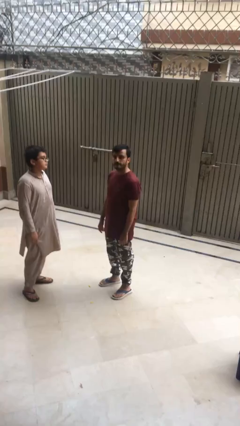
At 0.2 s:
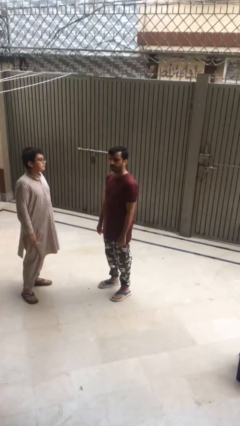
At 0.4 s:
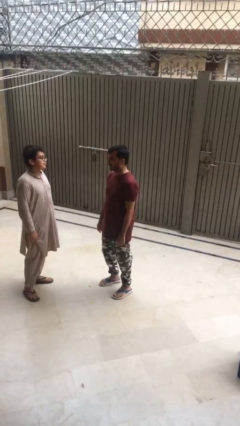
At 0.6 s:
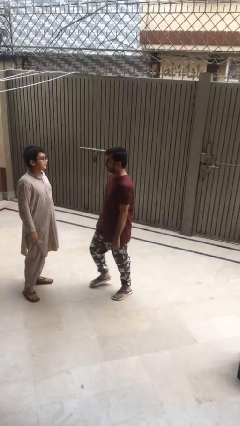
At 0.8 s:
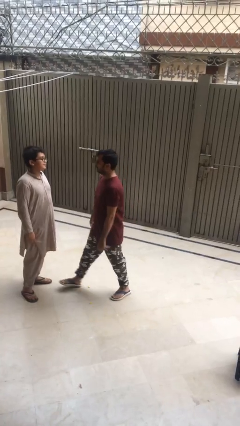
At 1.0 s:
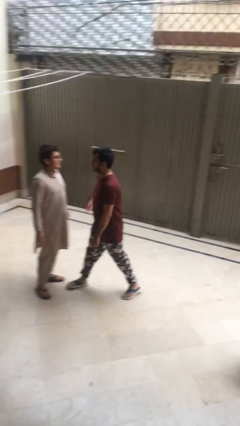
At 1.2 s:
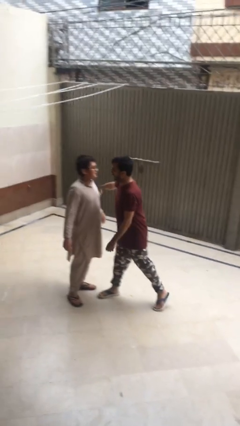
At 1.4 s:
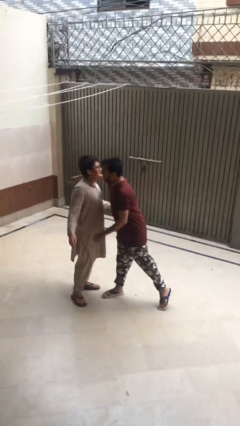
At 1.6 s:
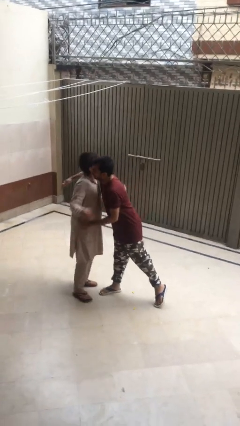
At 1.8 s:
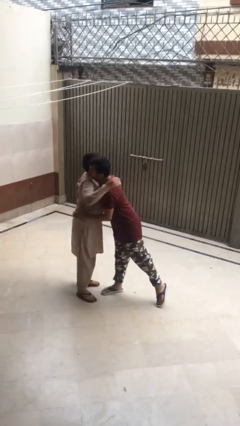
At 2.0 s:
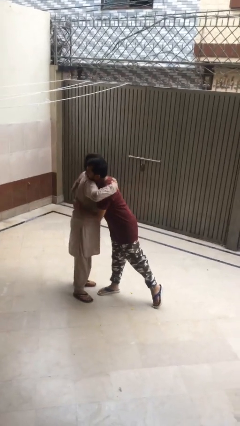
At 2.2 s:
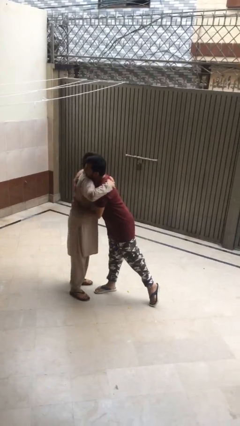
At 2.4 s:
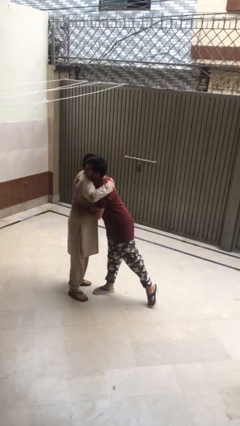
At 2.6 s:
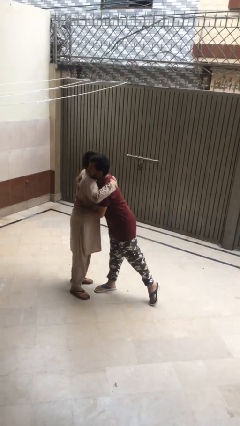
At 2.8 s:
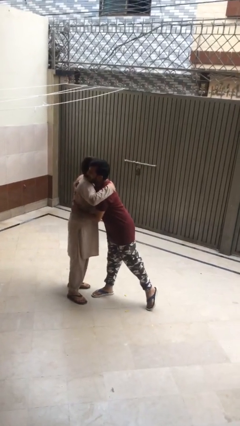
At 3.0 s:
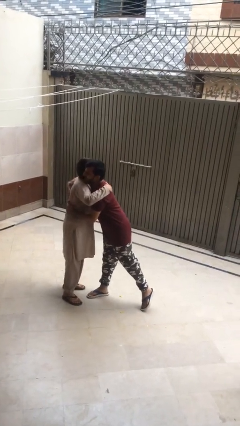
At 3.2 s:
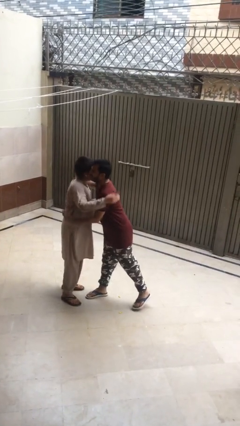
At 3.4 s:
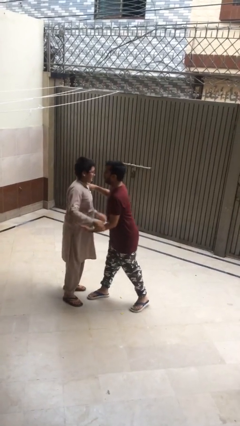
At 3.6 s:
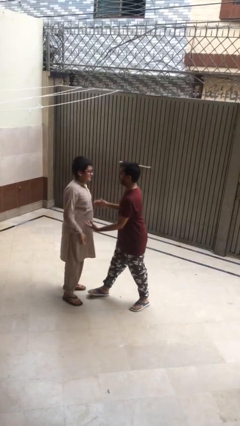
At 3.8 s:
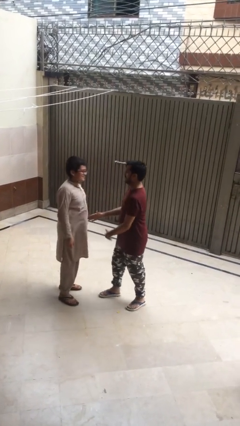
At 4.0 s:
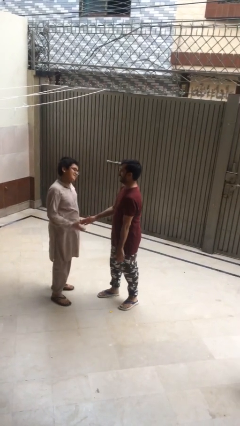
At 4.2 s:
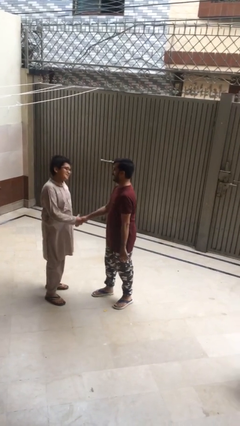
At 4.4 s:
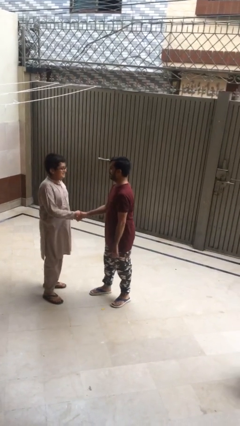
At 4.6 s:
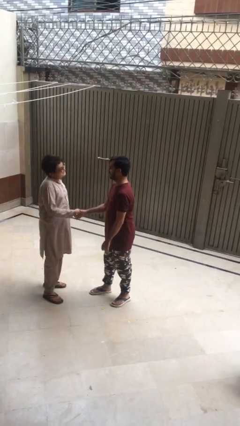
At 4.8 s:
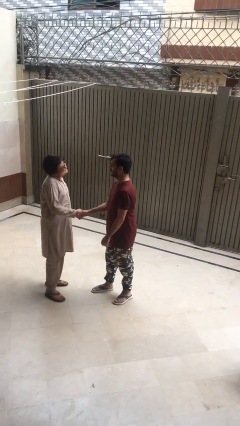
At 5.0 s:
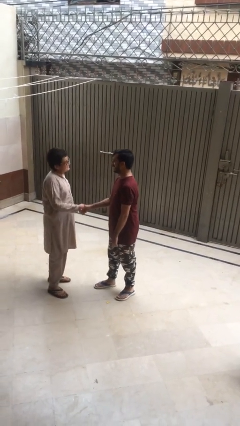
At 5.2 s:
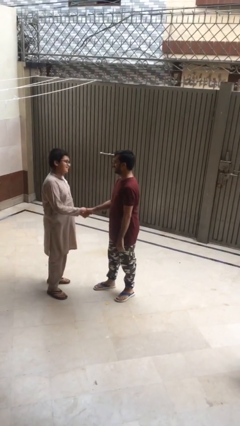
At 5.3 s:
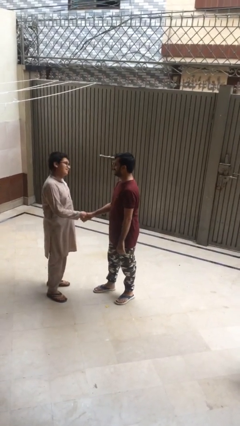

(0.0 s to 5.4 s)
person embraces person

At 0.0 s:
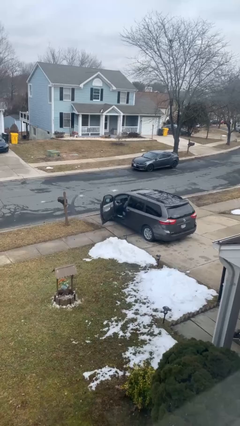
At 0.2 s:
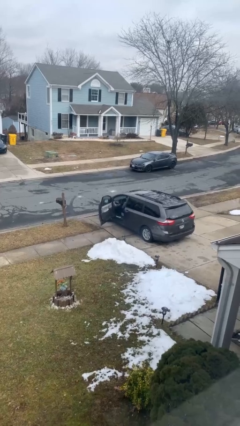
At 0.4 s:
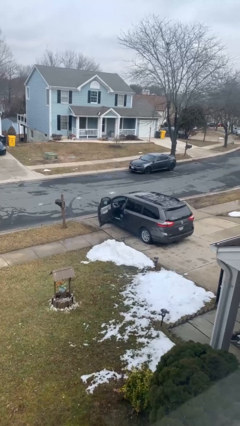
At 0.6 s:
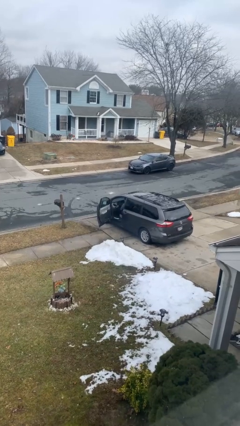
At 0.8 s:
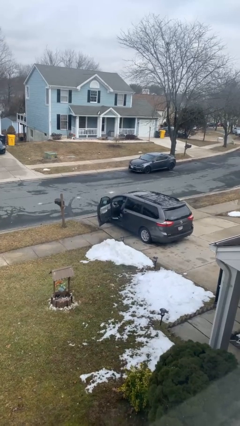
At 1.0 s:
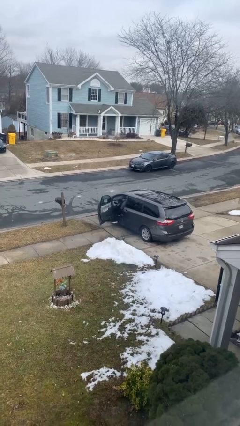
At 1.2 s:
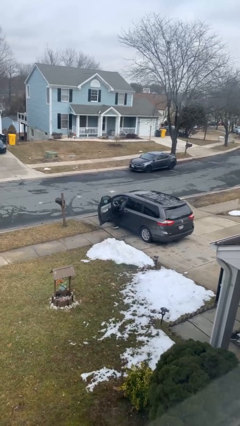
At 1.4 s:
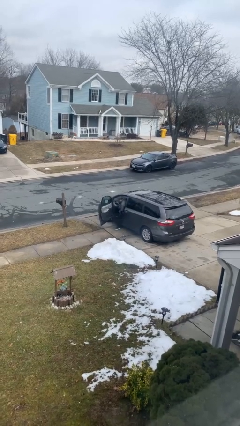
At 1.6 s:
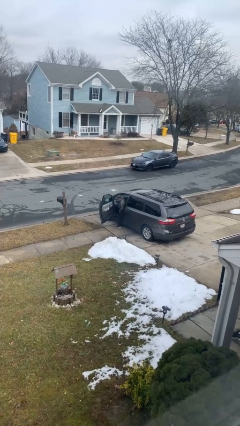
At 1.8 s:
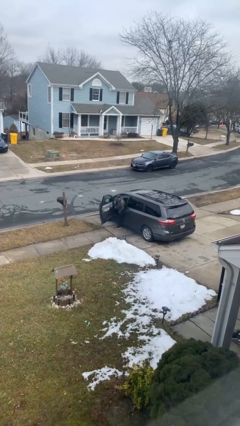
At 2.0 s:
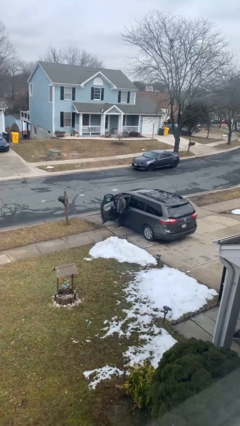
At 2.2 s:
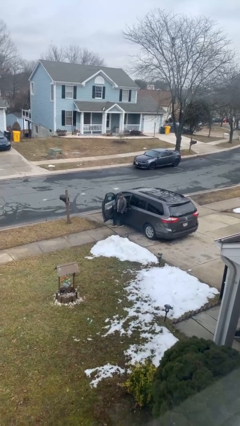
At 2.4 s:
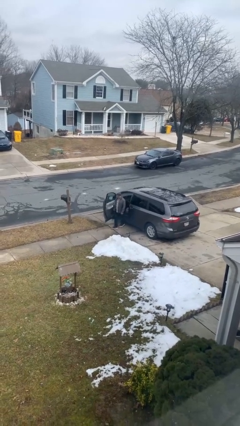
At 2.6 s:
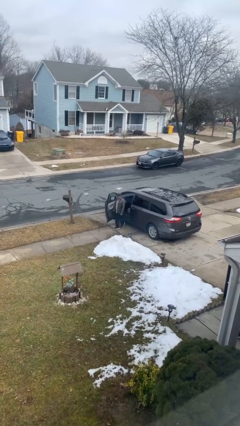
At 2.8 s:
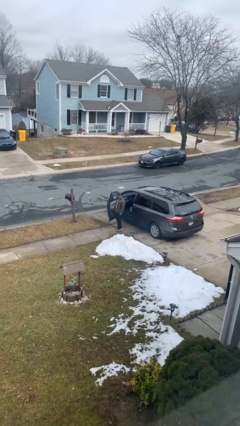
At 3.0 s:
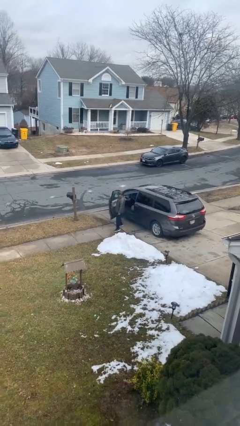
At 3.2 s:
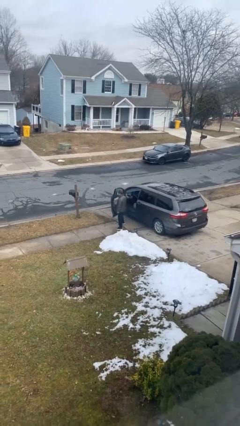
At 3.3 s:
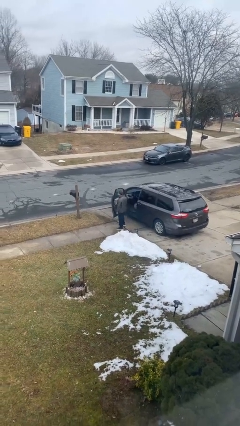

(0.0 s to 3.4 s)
person exits car

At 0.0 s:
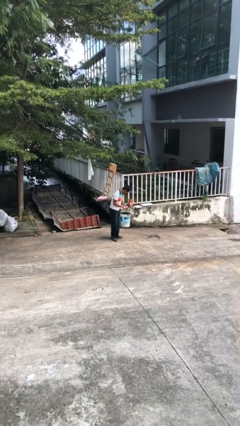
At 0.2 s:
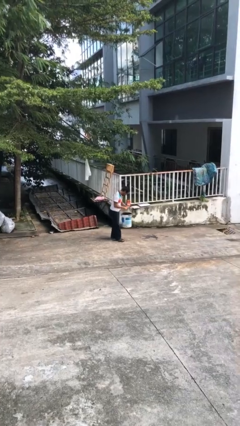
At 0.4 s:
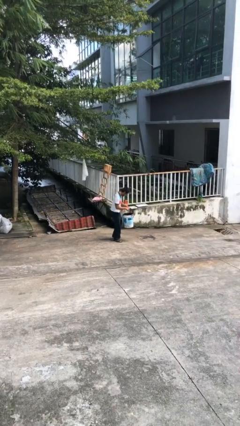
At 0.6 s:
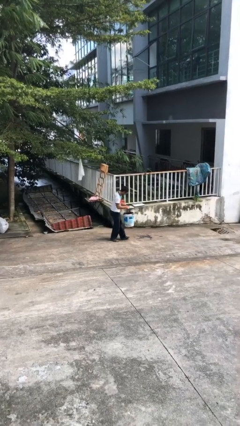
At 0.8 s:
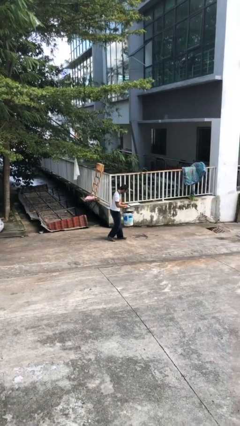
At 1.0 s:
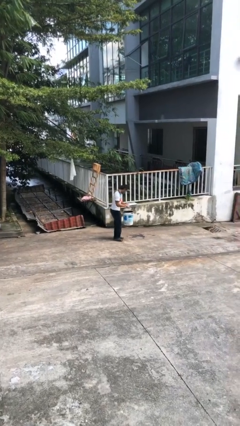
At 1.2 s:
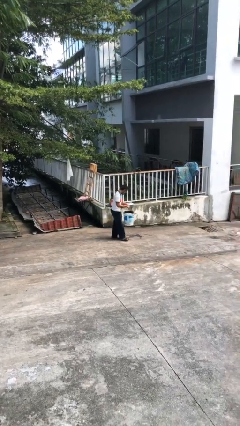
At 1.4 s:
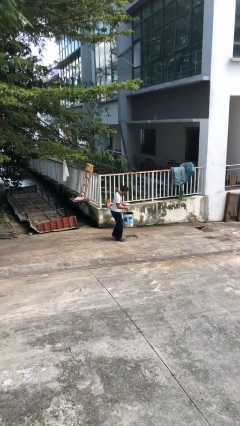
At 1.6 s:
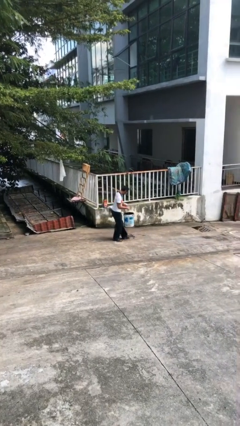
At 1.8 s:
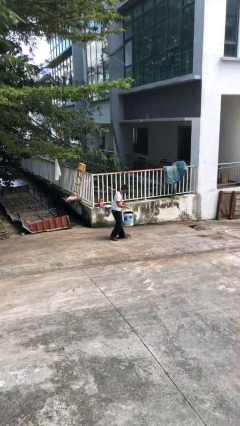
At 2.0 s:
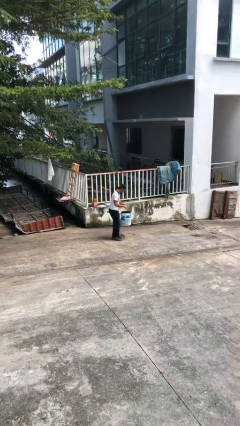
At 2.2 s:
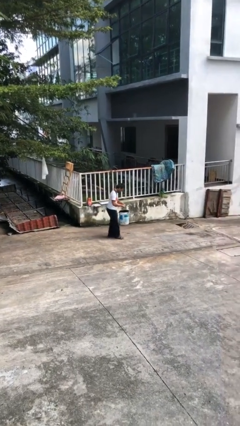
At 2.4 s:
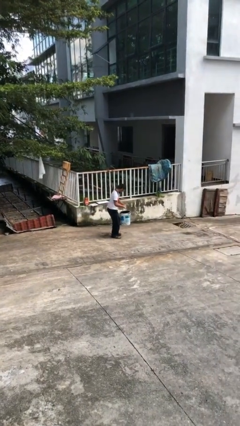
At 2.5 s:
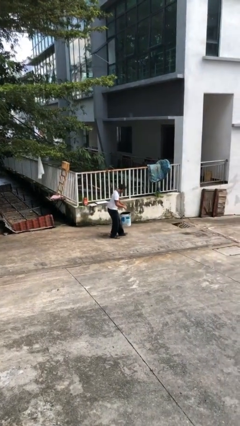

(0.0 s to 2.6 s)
person carries heavy object

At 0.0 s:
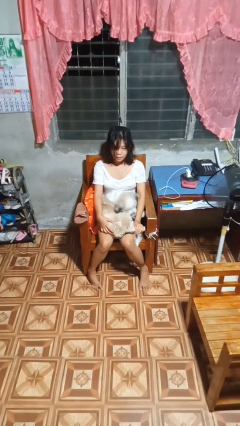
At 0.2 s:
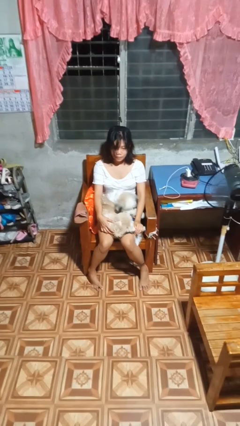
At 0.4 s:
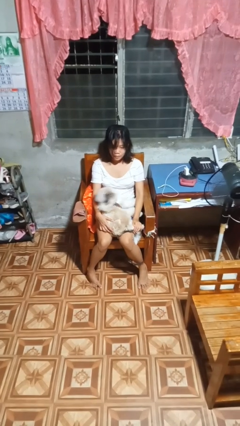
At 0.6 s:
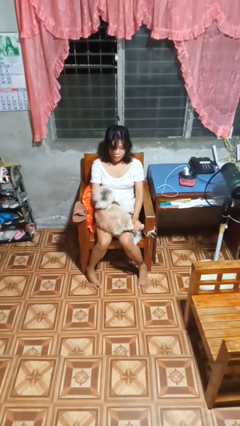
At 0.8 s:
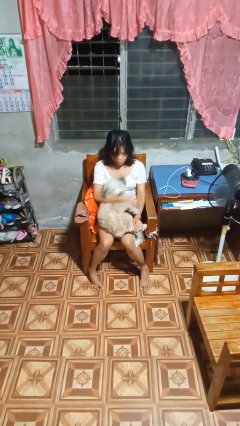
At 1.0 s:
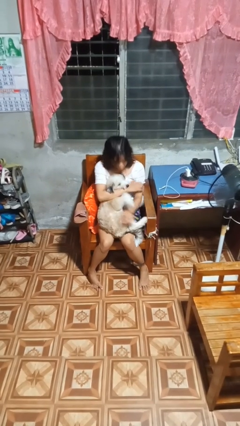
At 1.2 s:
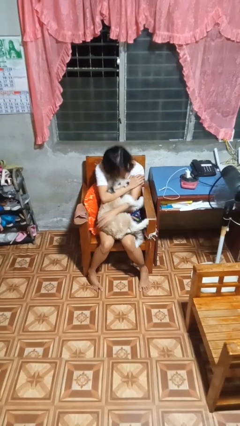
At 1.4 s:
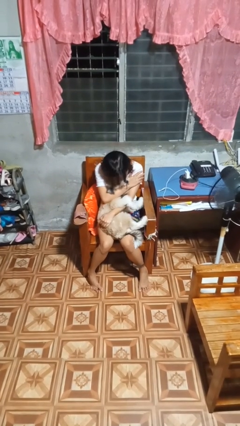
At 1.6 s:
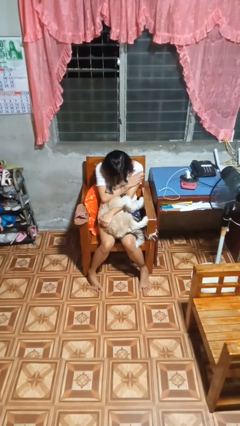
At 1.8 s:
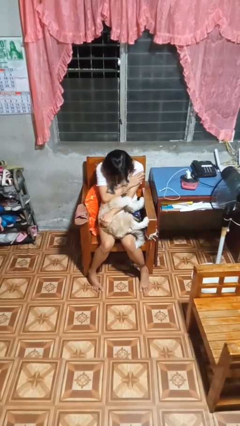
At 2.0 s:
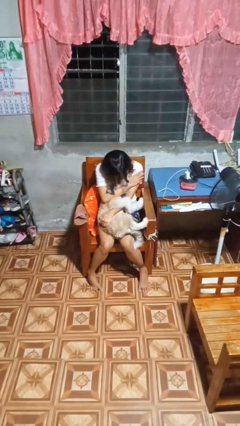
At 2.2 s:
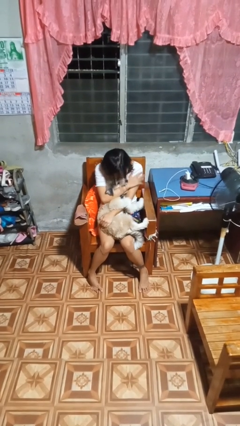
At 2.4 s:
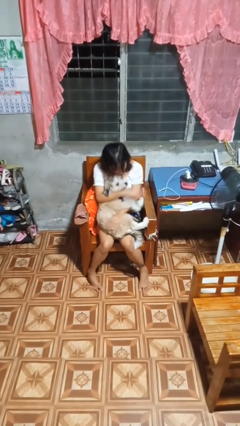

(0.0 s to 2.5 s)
person hugs dog

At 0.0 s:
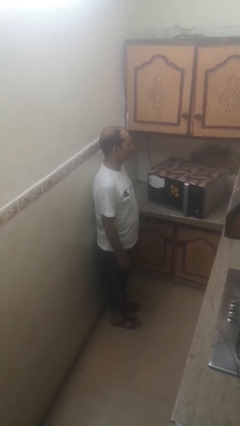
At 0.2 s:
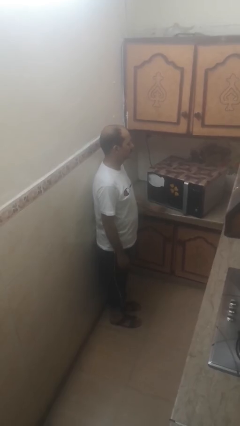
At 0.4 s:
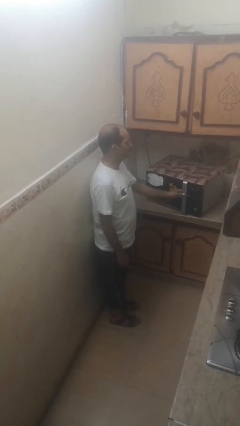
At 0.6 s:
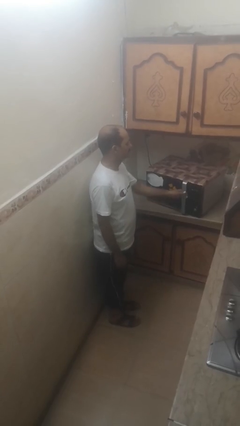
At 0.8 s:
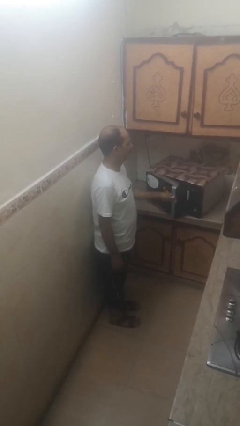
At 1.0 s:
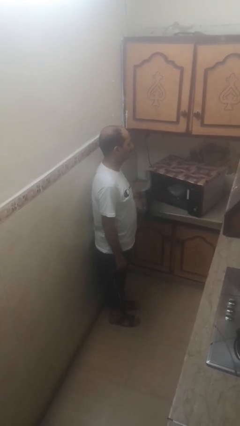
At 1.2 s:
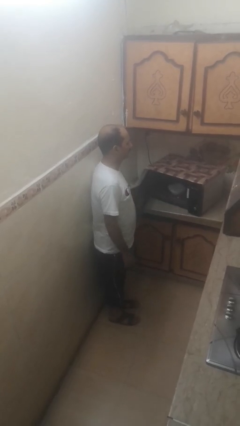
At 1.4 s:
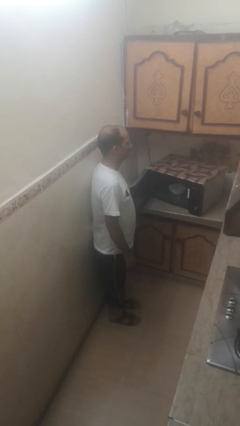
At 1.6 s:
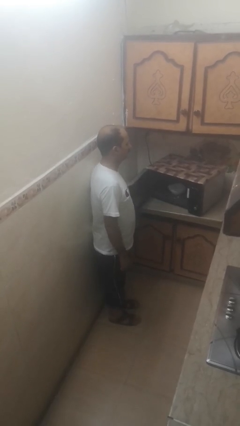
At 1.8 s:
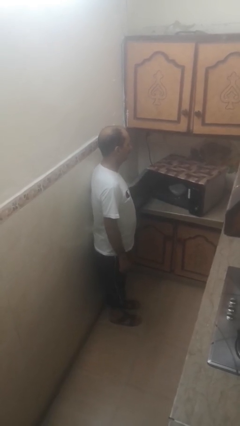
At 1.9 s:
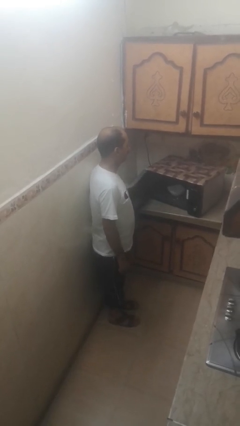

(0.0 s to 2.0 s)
person opens microwave

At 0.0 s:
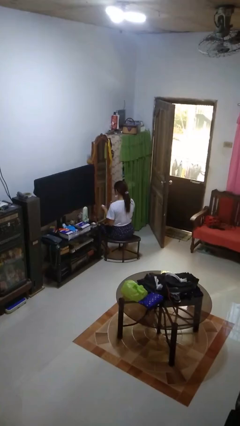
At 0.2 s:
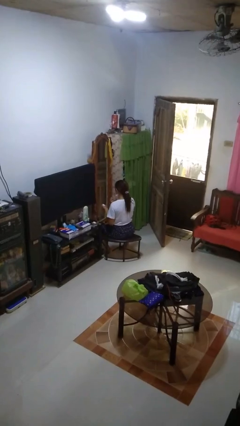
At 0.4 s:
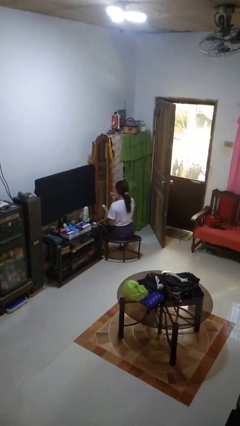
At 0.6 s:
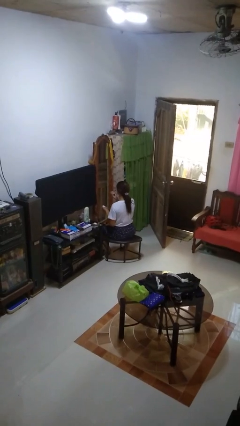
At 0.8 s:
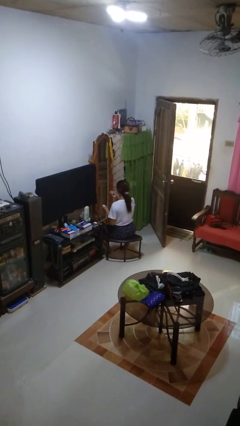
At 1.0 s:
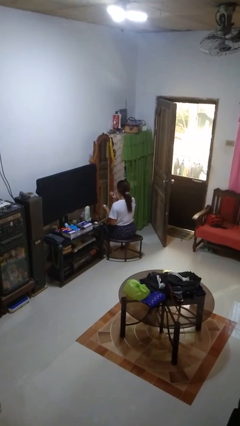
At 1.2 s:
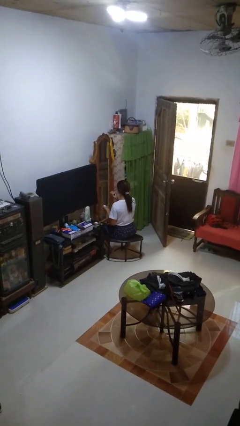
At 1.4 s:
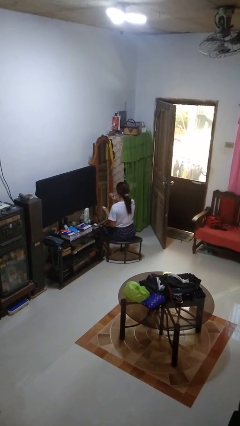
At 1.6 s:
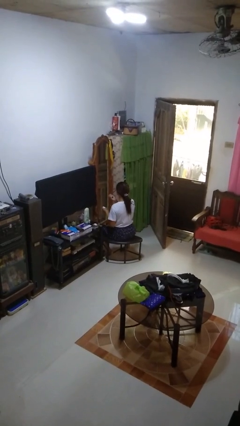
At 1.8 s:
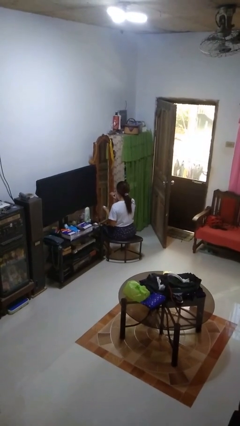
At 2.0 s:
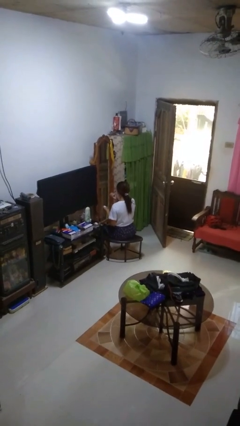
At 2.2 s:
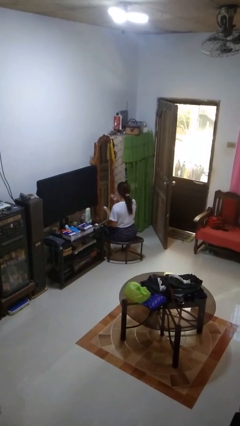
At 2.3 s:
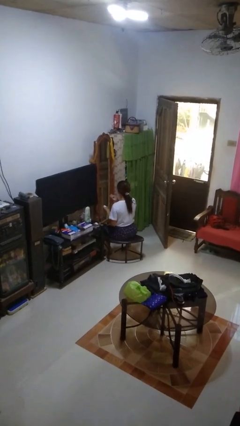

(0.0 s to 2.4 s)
person applies eye makeup
